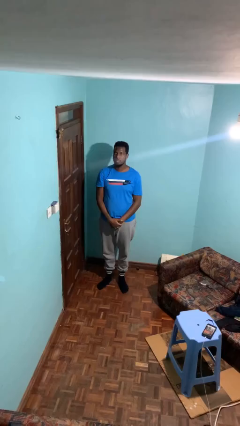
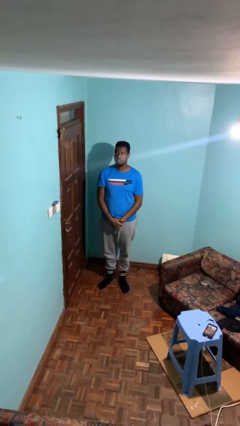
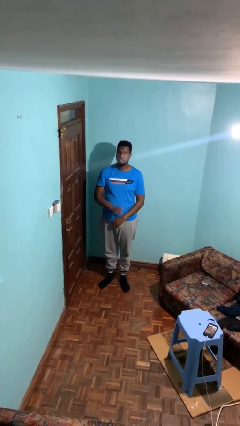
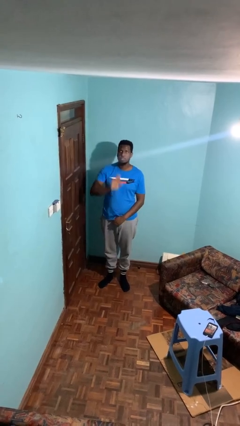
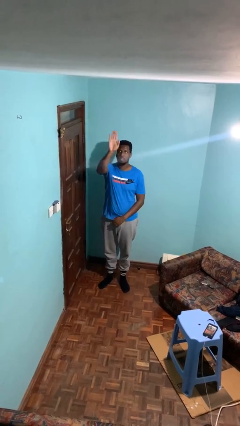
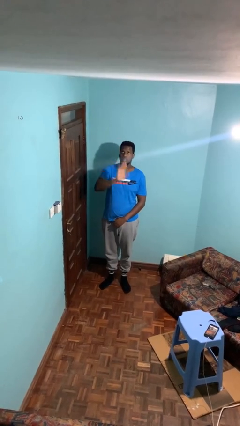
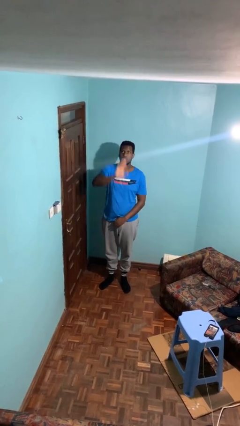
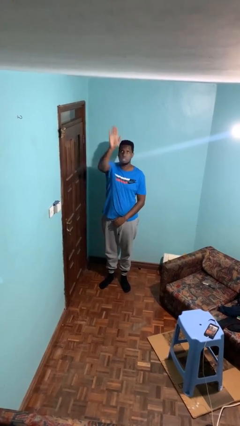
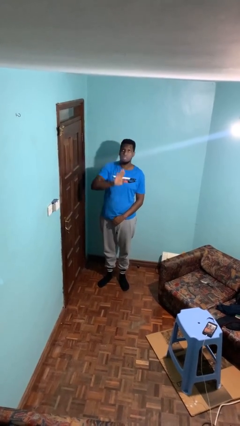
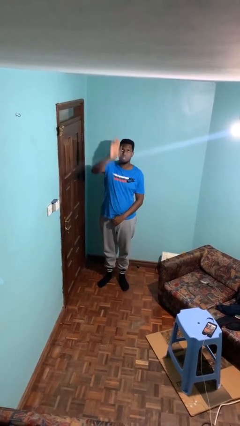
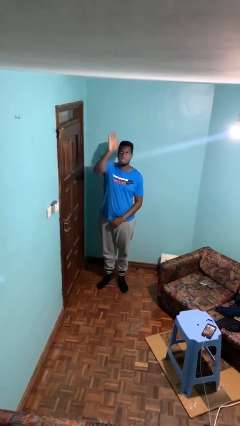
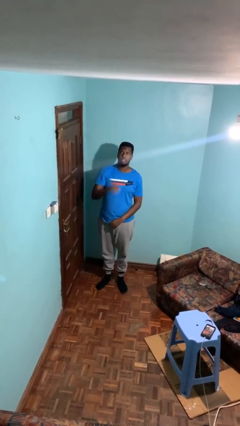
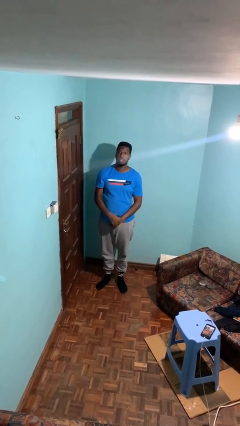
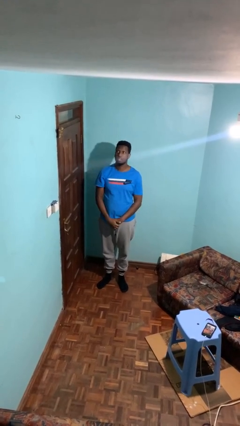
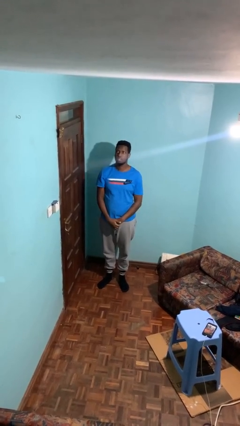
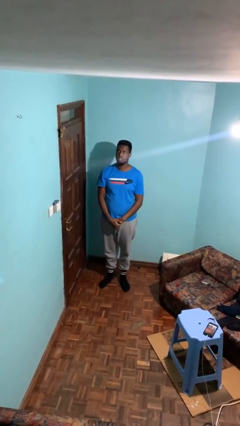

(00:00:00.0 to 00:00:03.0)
person gestures swipe up

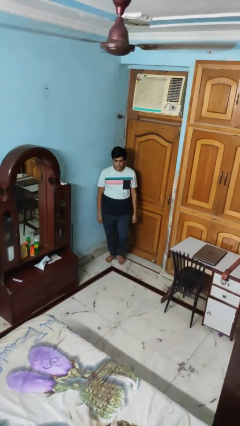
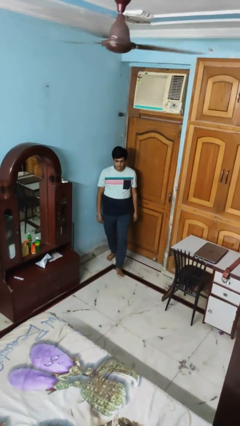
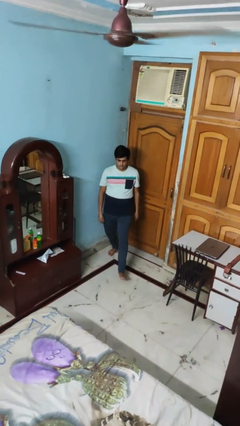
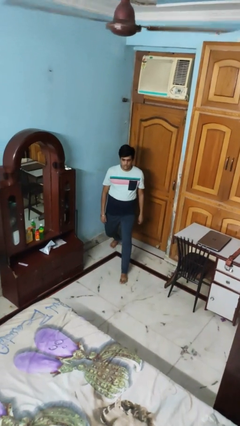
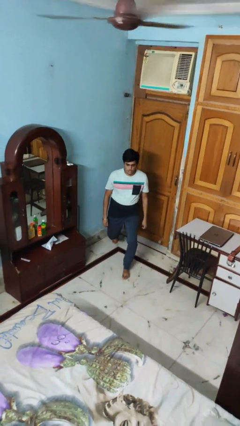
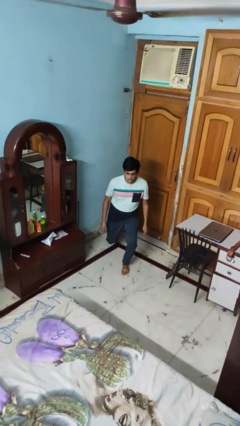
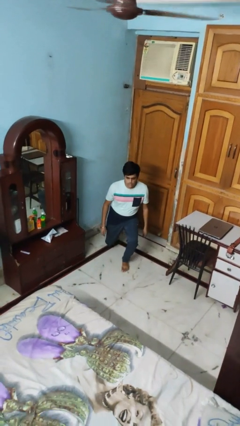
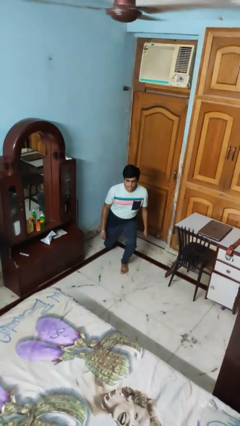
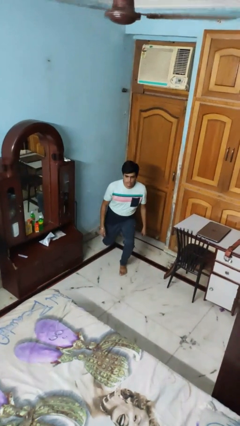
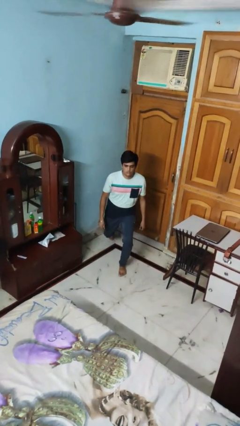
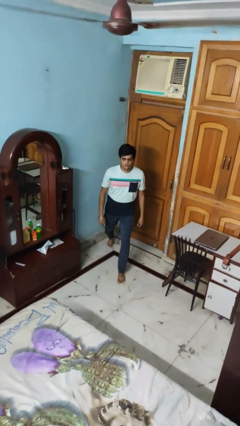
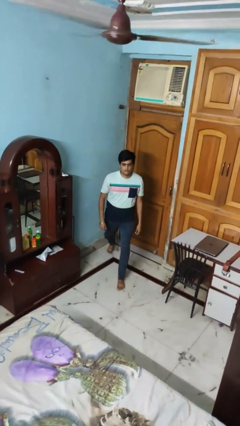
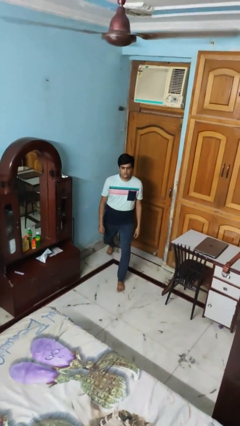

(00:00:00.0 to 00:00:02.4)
person exercises with lunges

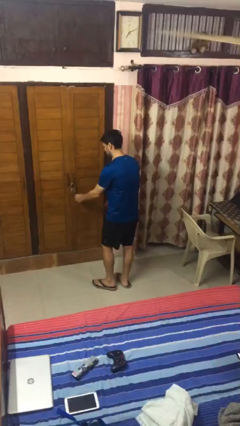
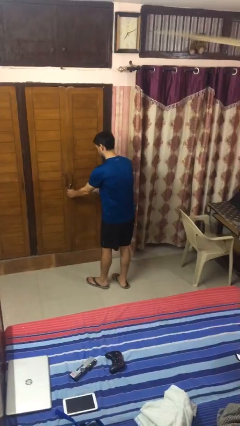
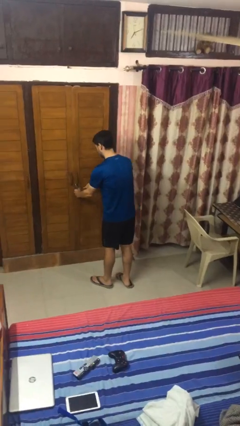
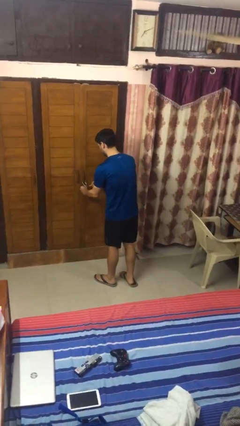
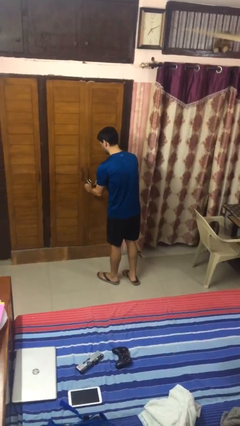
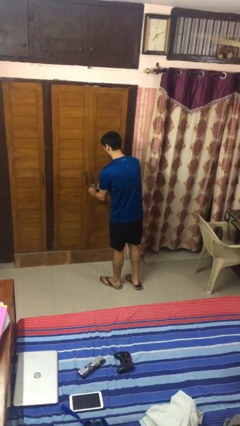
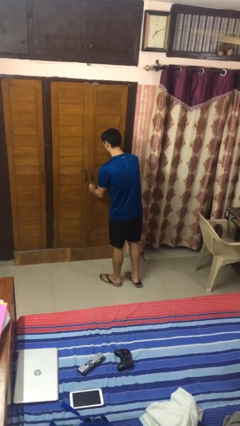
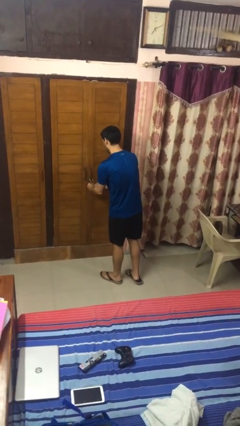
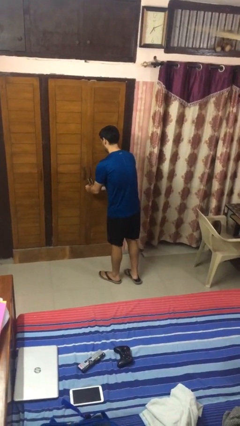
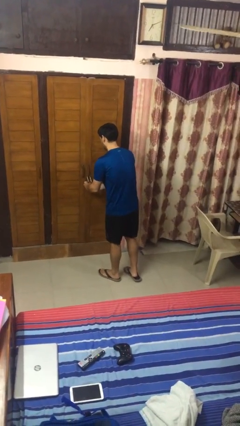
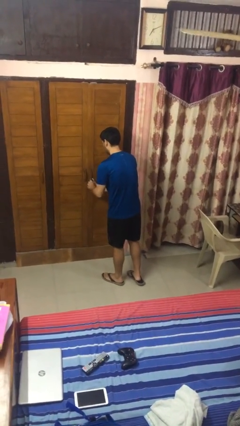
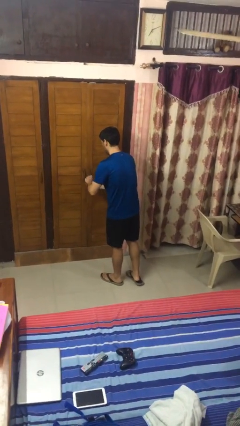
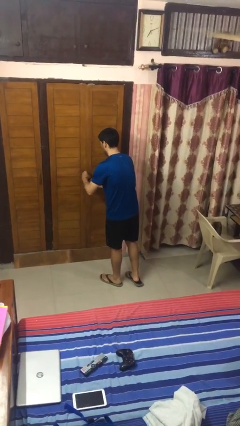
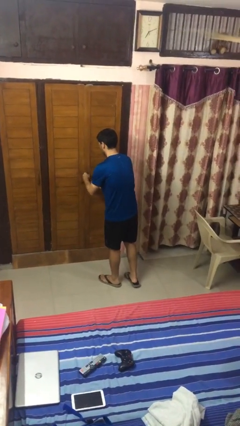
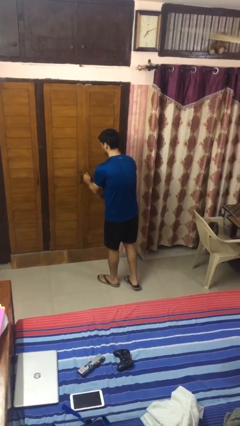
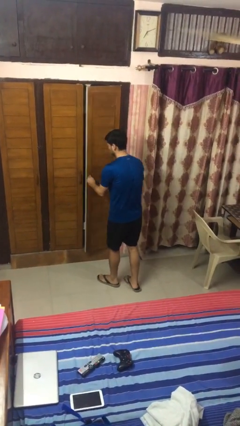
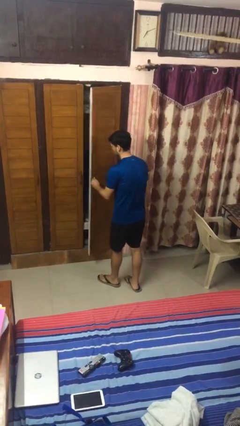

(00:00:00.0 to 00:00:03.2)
person unlocks door with keys

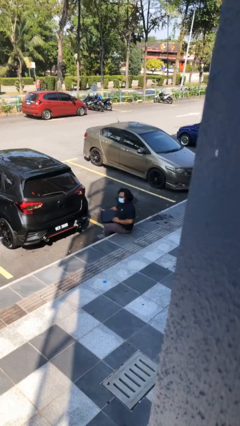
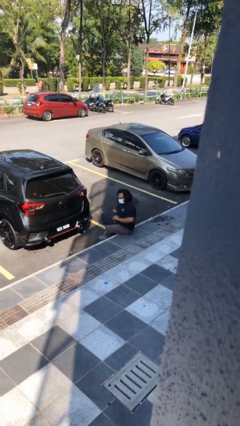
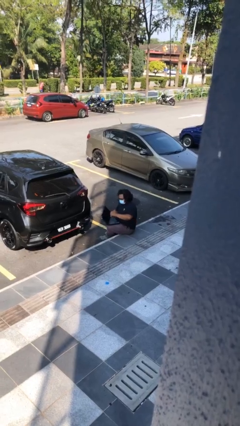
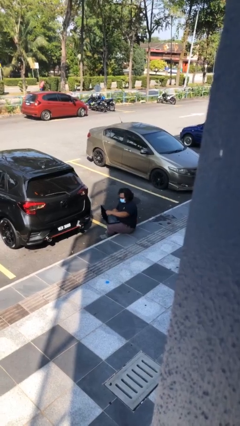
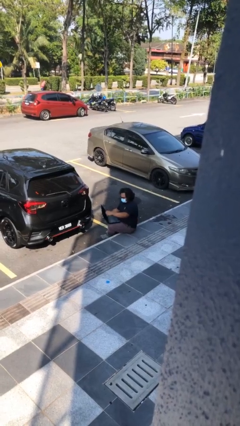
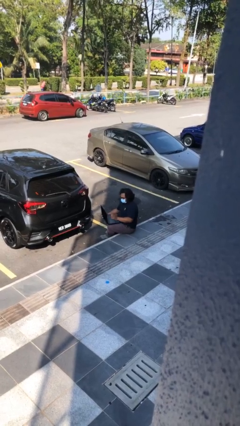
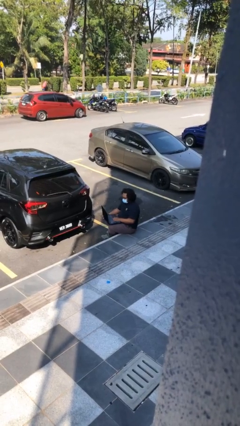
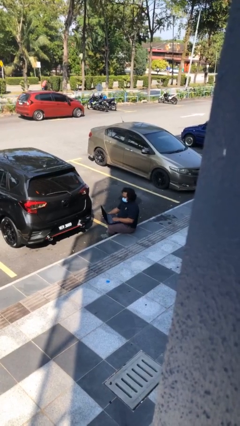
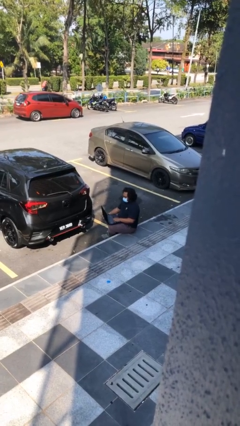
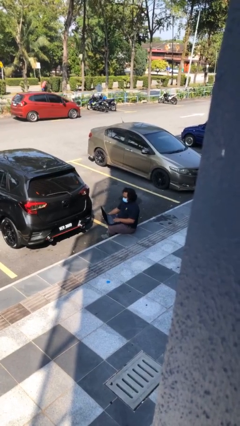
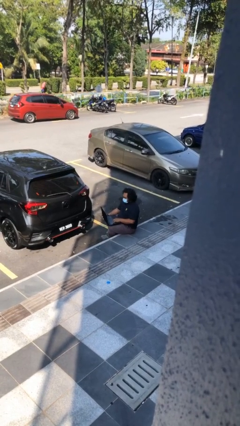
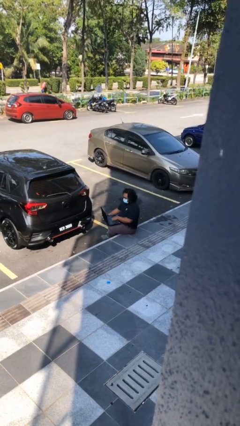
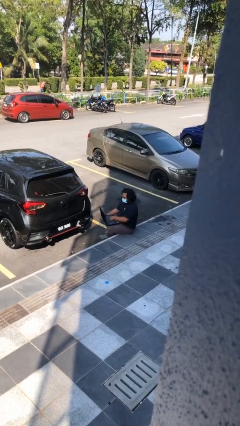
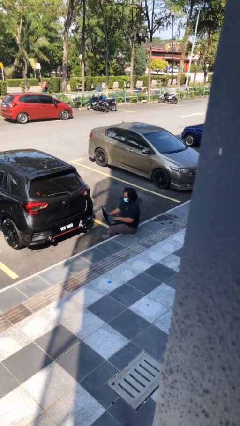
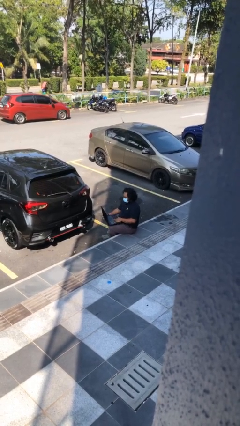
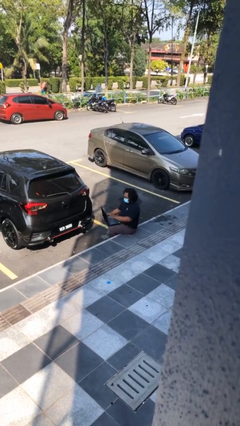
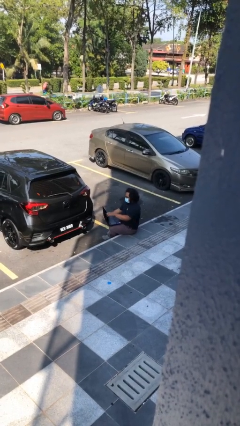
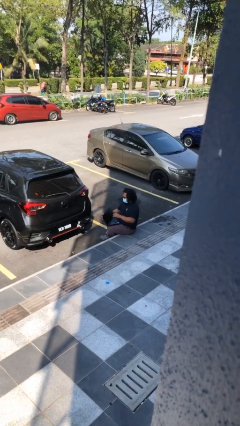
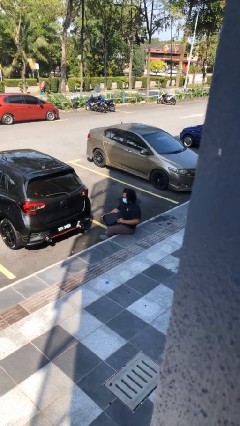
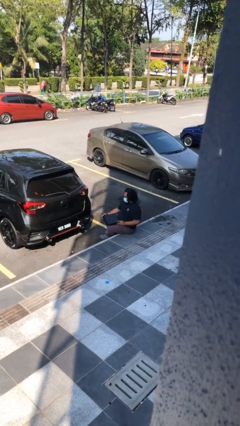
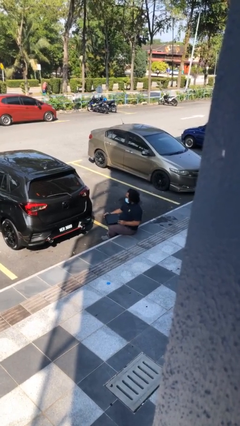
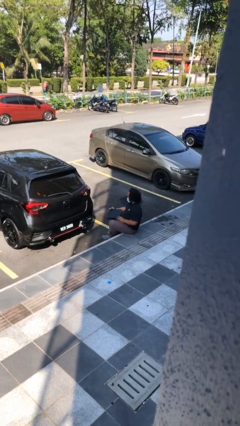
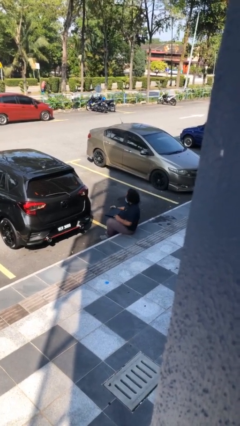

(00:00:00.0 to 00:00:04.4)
person interacts with laptop

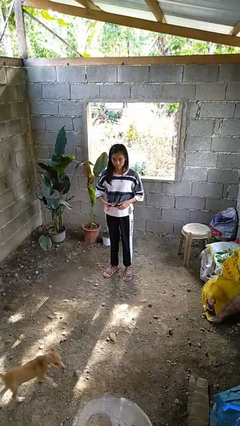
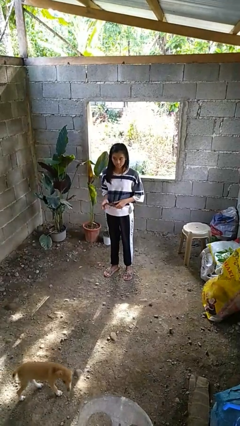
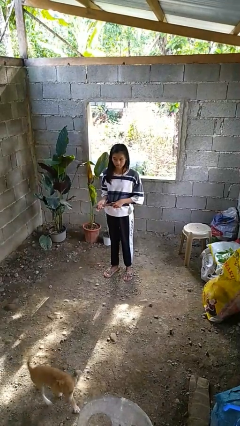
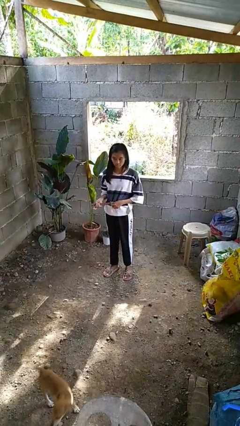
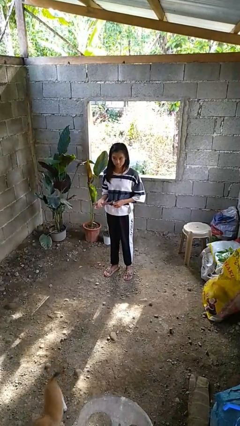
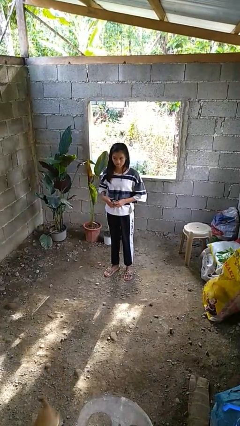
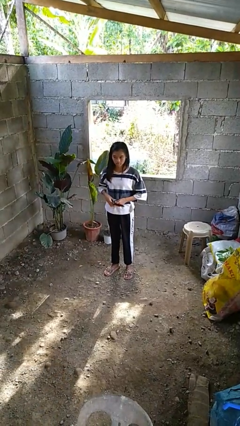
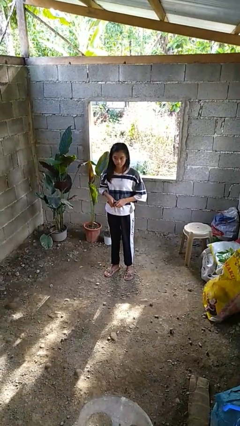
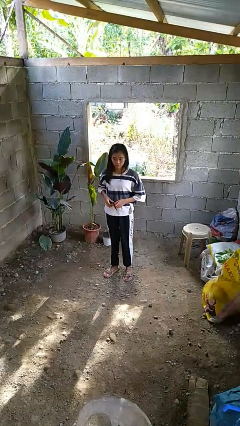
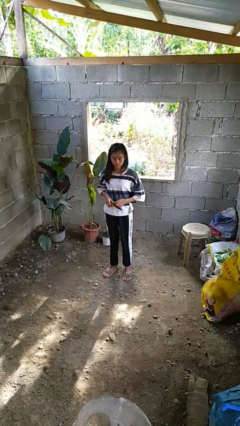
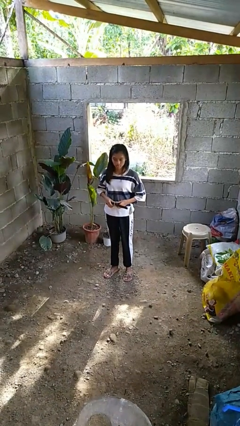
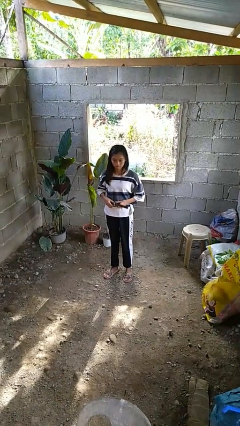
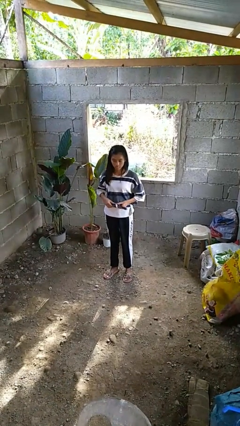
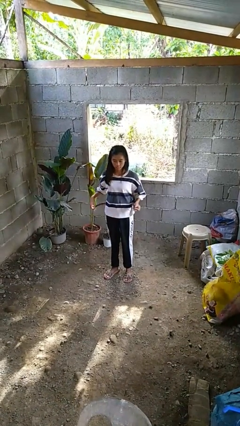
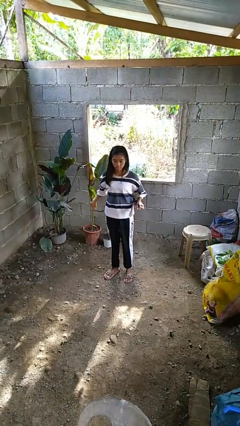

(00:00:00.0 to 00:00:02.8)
person takes off belt

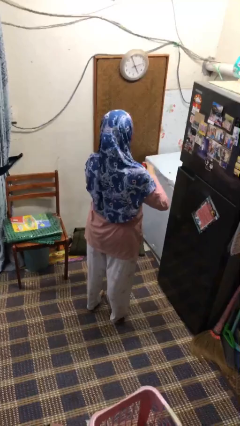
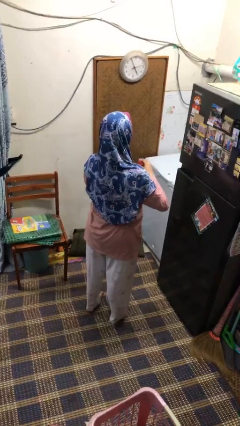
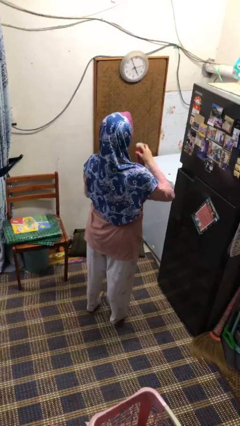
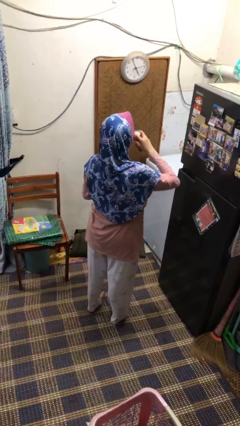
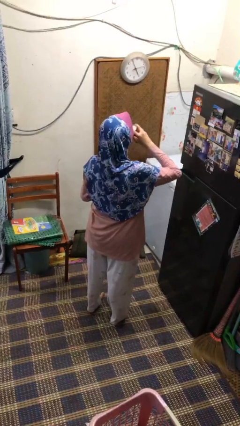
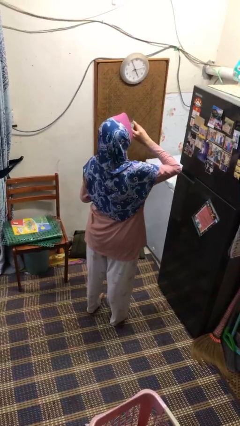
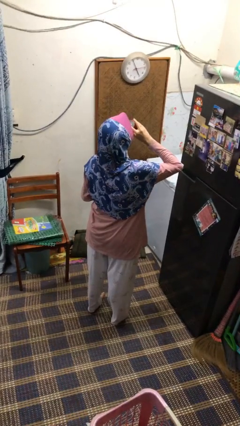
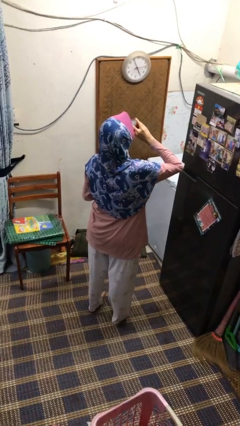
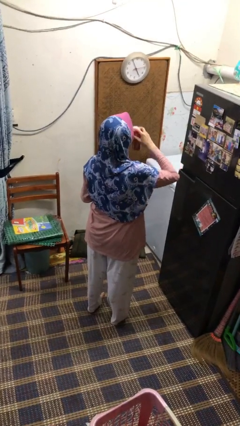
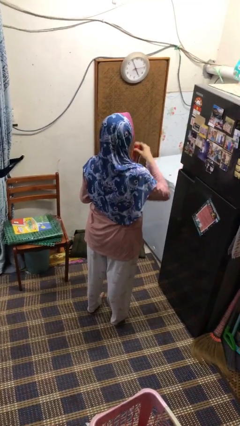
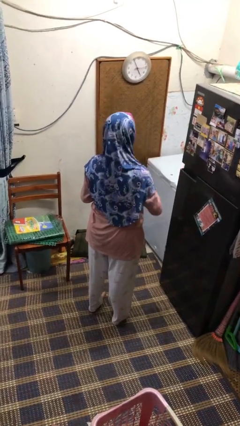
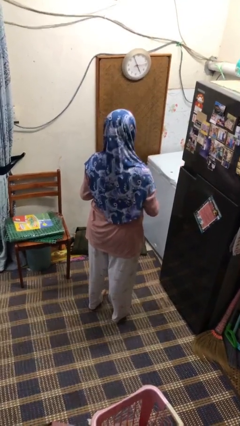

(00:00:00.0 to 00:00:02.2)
person drinks from beverage can
